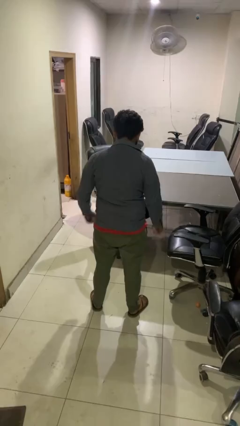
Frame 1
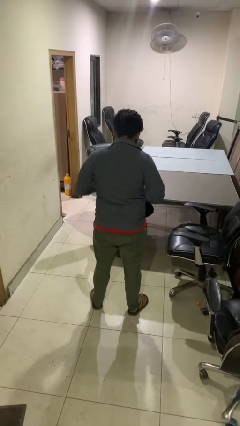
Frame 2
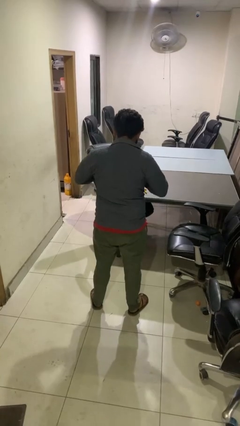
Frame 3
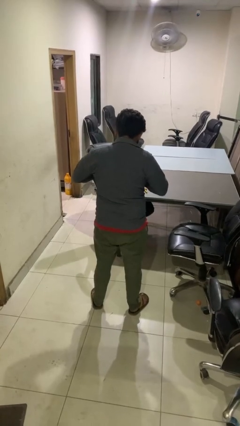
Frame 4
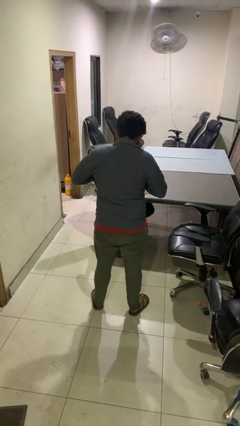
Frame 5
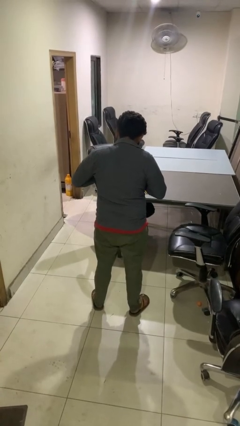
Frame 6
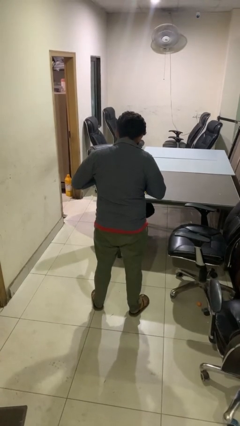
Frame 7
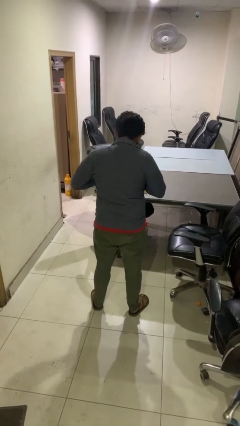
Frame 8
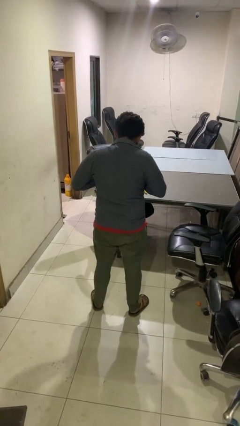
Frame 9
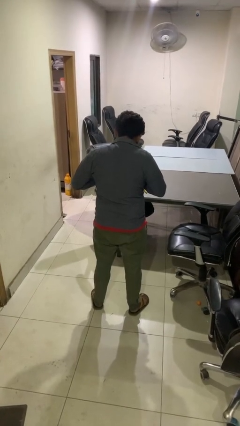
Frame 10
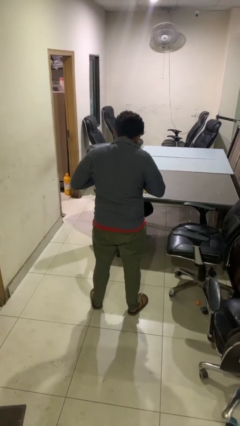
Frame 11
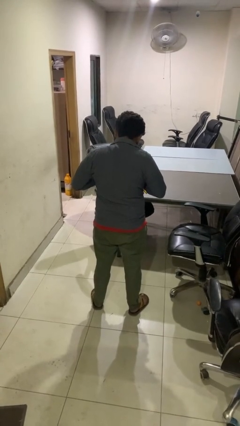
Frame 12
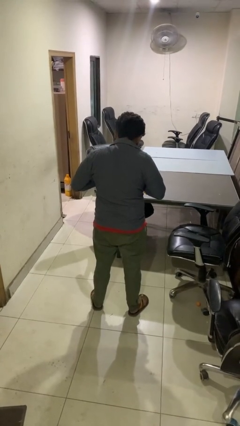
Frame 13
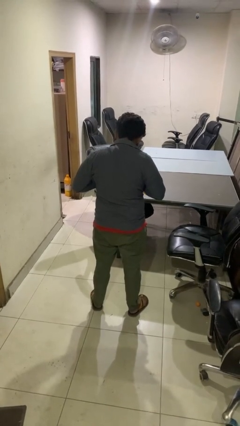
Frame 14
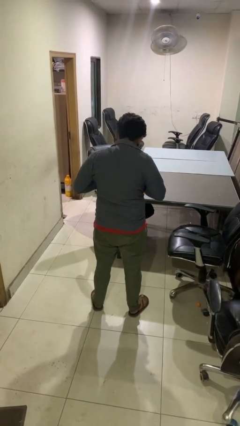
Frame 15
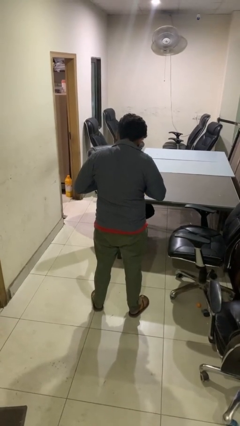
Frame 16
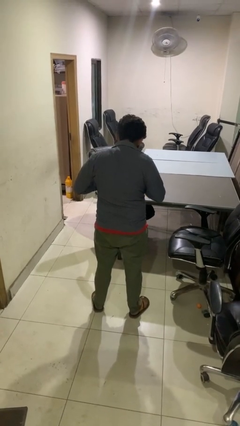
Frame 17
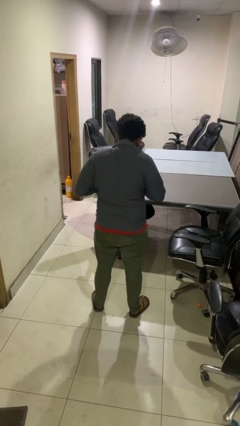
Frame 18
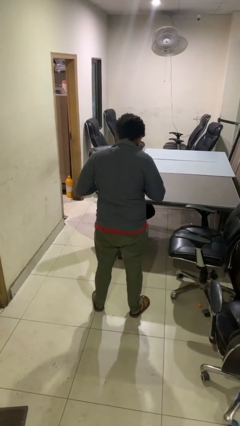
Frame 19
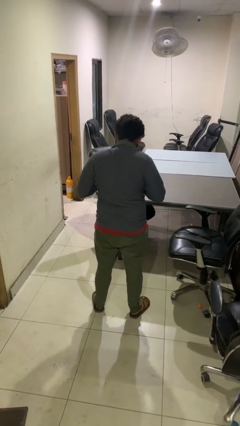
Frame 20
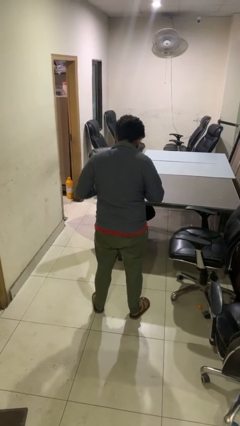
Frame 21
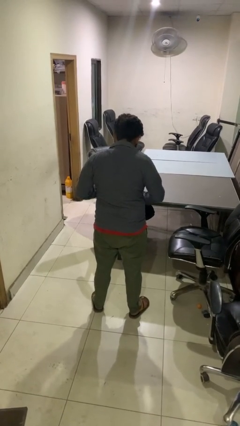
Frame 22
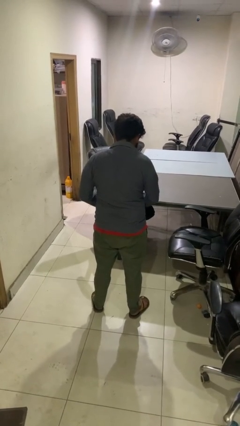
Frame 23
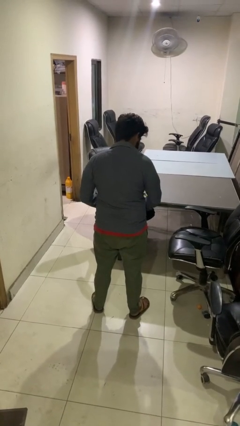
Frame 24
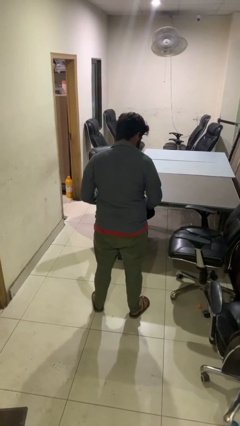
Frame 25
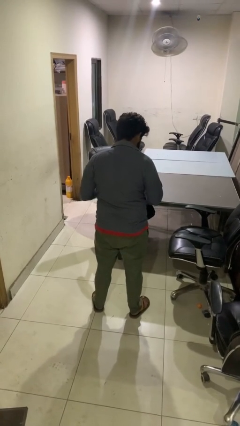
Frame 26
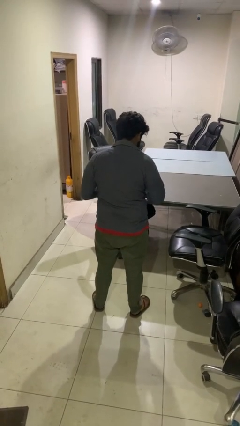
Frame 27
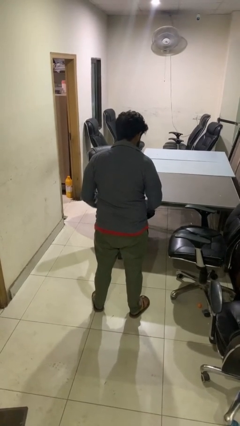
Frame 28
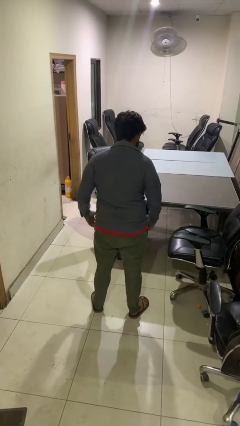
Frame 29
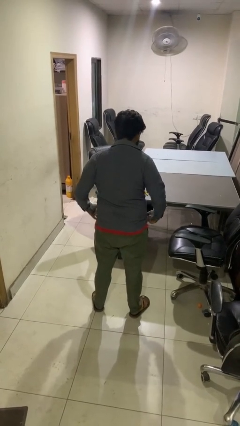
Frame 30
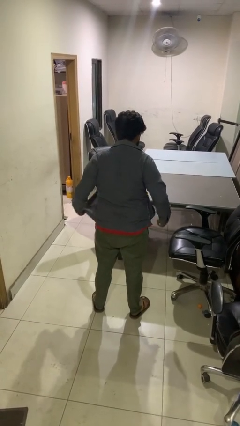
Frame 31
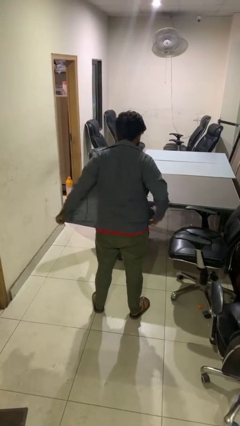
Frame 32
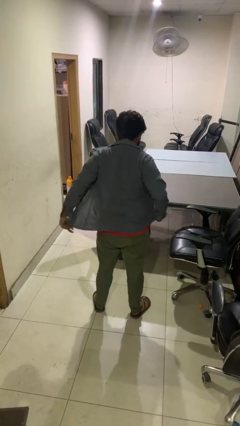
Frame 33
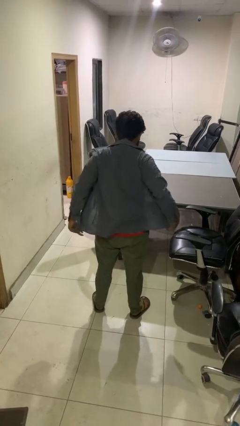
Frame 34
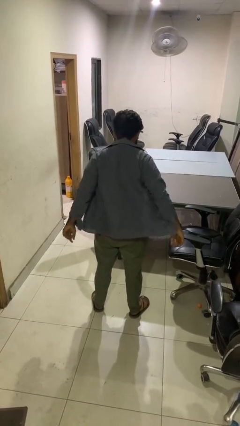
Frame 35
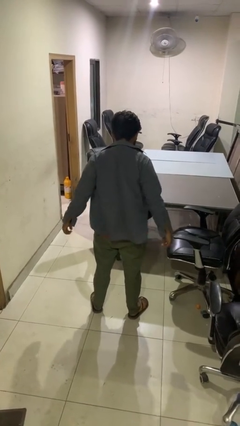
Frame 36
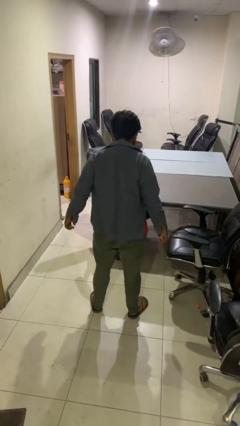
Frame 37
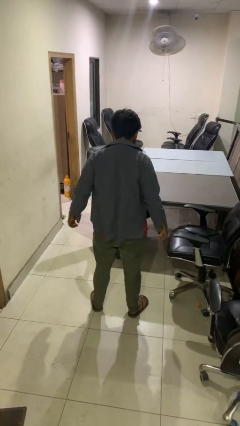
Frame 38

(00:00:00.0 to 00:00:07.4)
person unbuttons shirt

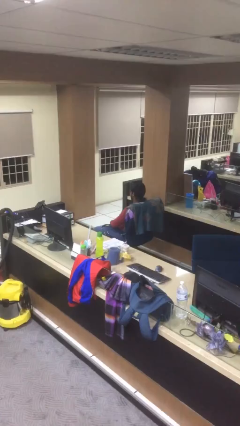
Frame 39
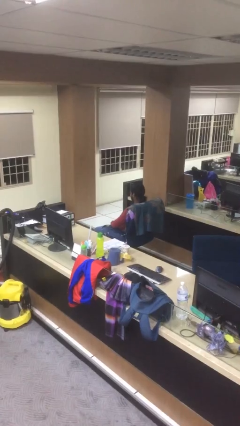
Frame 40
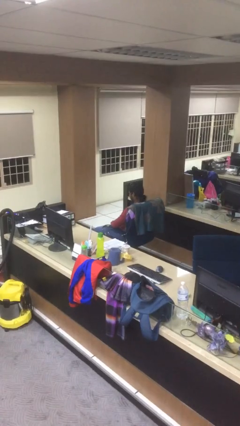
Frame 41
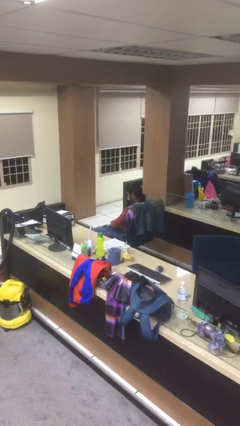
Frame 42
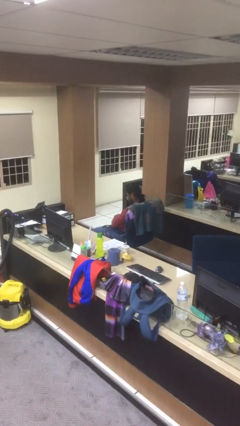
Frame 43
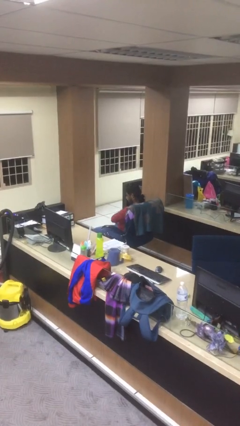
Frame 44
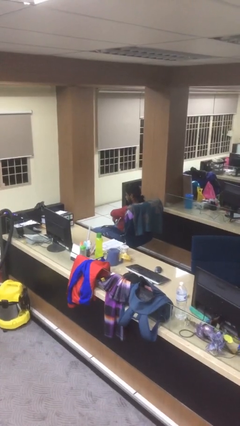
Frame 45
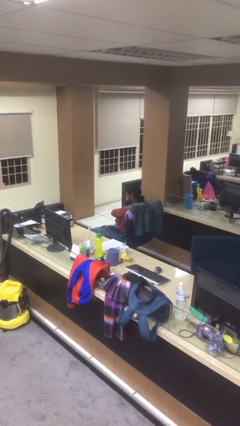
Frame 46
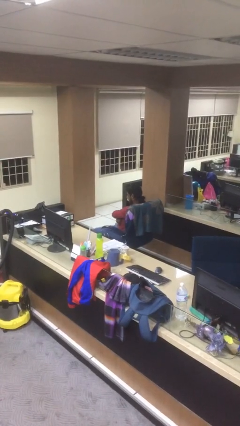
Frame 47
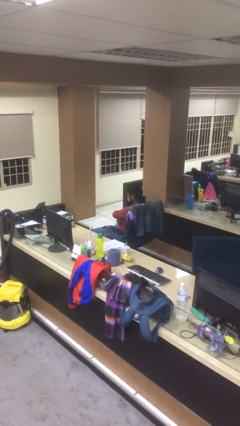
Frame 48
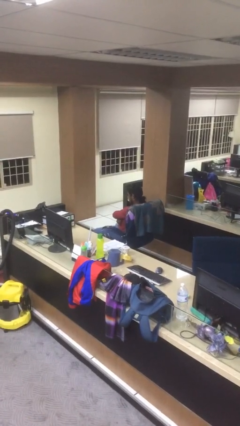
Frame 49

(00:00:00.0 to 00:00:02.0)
person crosses arms

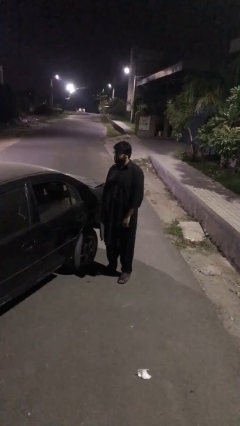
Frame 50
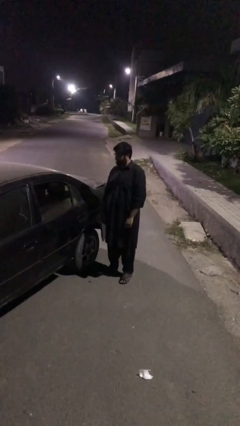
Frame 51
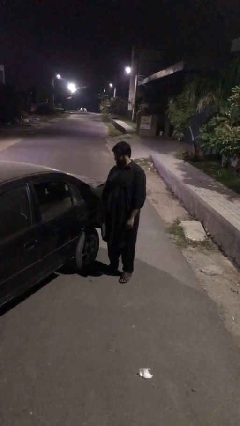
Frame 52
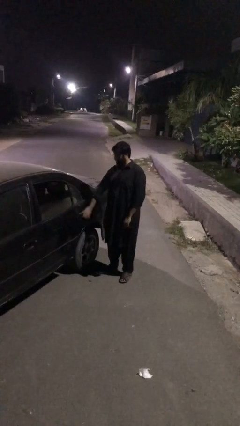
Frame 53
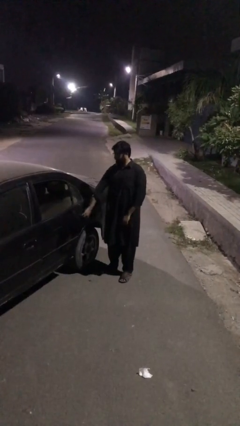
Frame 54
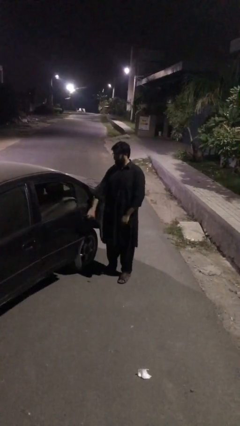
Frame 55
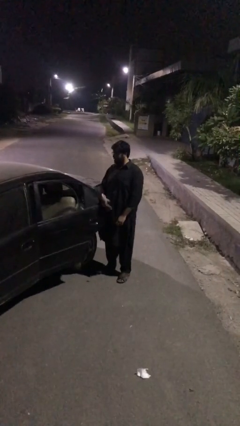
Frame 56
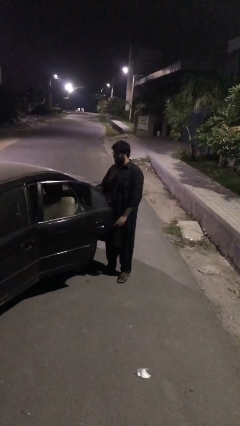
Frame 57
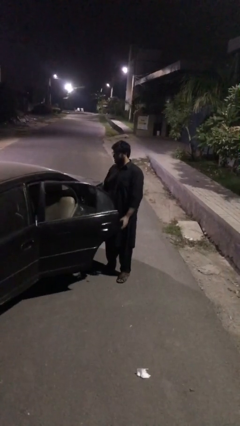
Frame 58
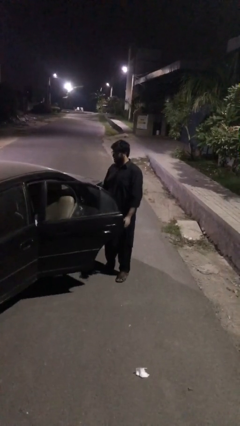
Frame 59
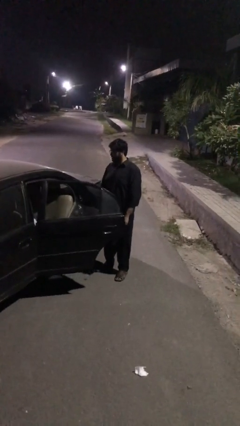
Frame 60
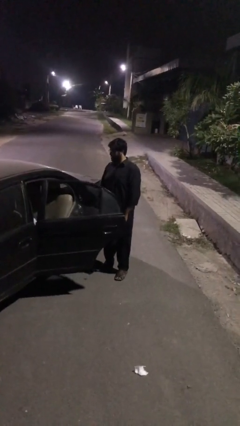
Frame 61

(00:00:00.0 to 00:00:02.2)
person opens car door

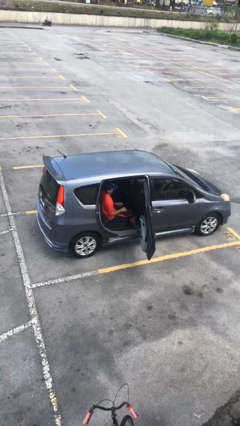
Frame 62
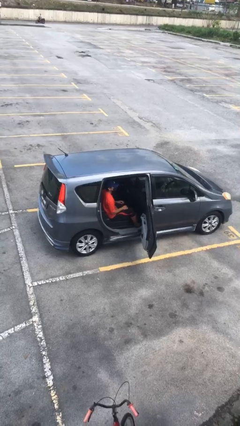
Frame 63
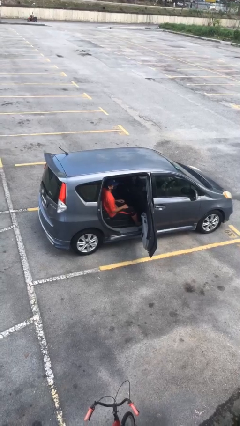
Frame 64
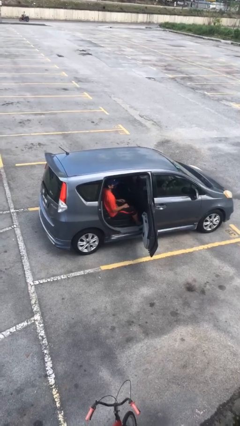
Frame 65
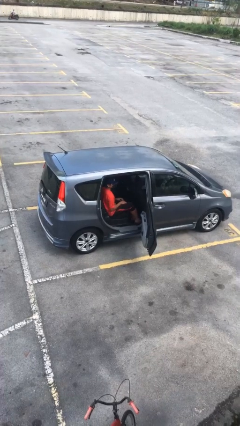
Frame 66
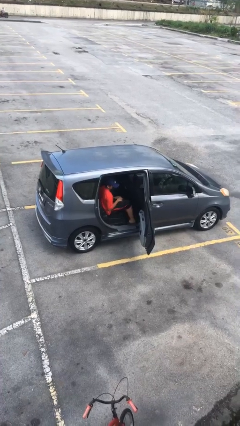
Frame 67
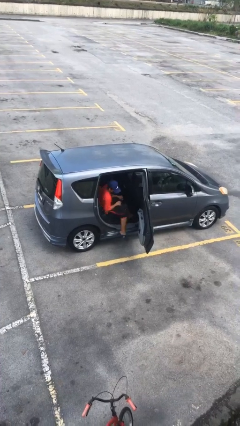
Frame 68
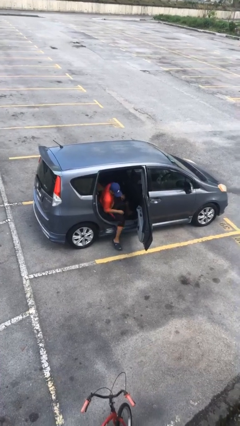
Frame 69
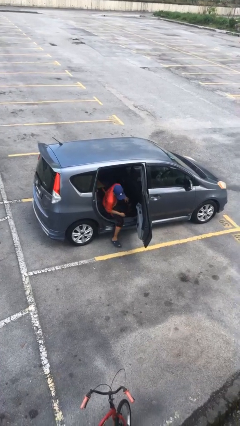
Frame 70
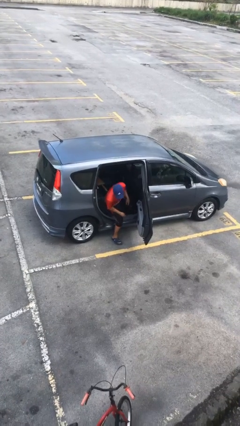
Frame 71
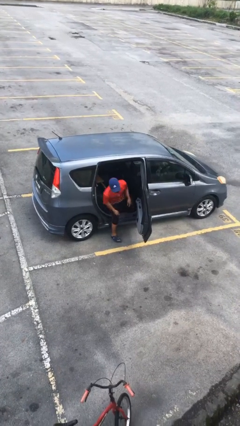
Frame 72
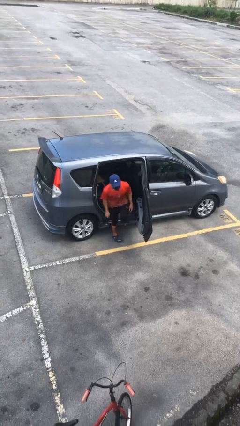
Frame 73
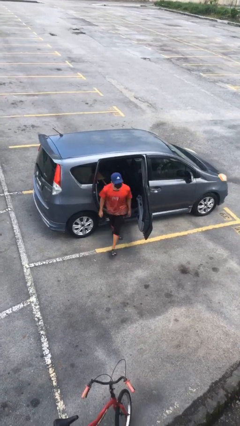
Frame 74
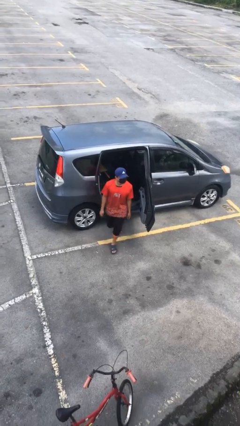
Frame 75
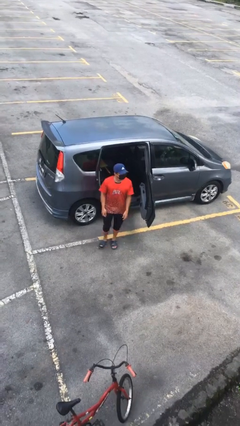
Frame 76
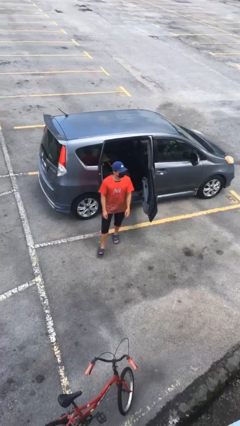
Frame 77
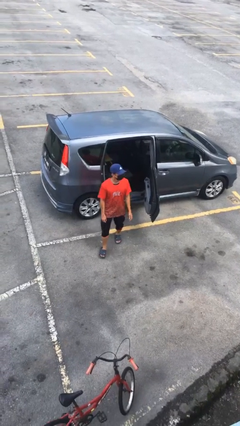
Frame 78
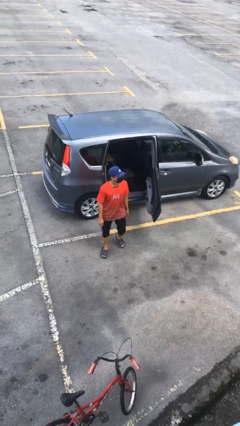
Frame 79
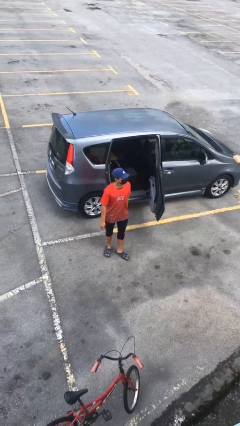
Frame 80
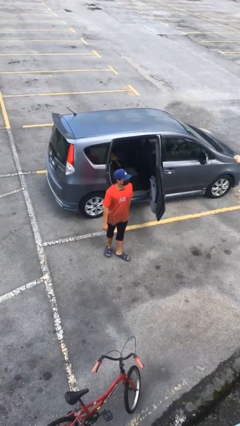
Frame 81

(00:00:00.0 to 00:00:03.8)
person exits car

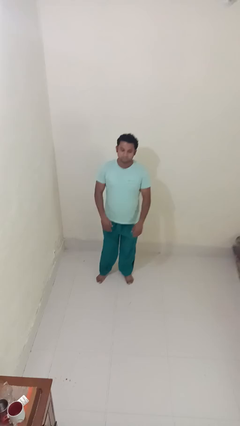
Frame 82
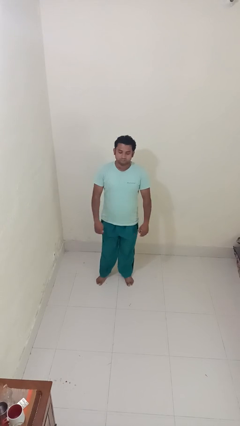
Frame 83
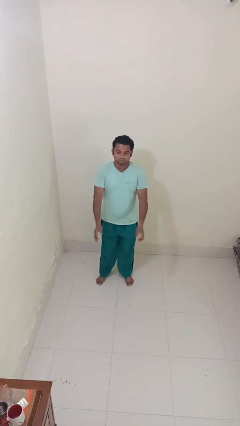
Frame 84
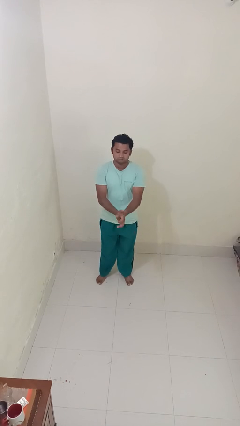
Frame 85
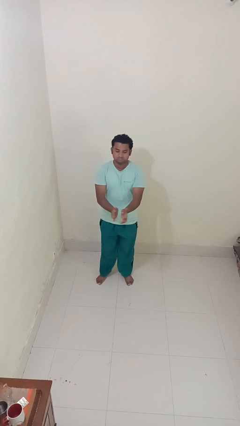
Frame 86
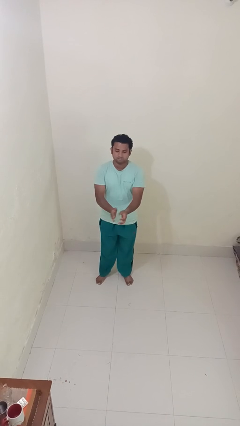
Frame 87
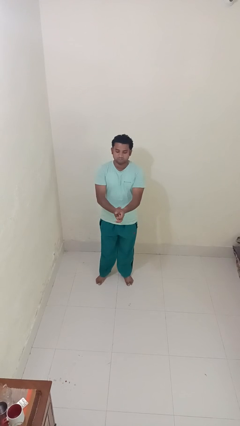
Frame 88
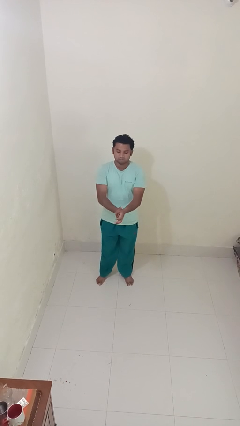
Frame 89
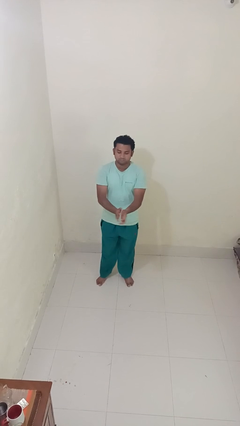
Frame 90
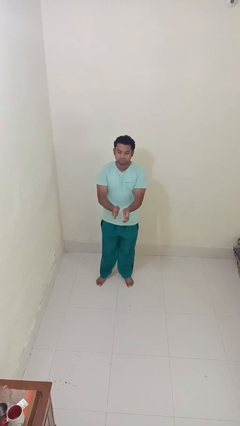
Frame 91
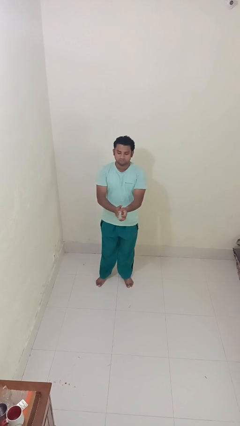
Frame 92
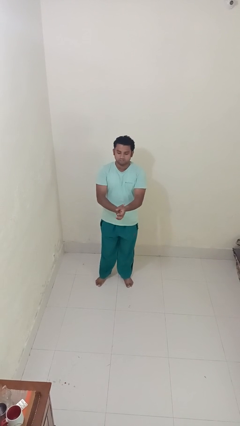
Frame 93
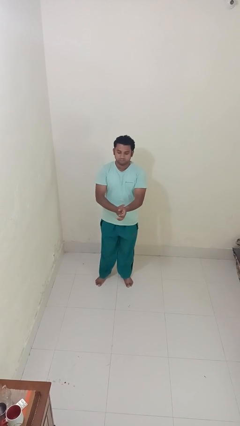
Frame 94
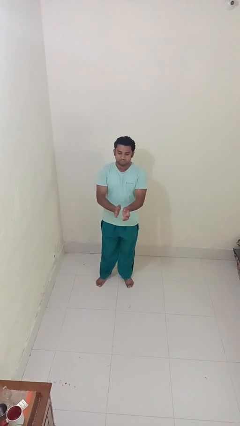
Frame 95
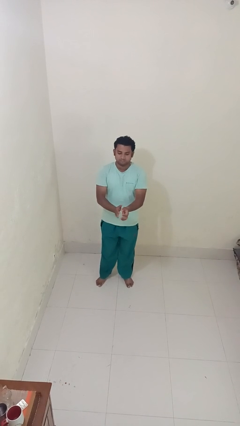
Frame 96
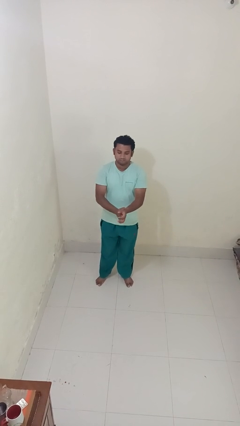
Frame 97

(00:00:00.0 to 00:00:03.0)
person claps hands
